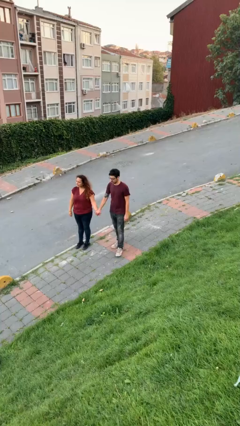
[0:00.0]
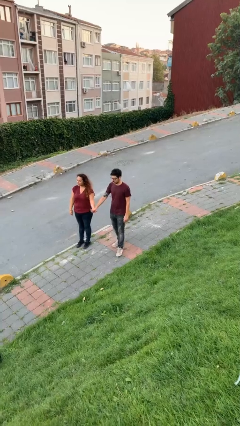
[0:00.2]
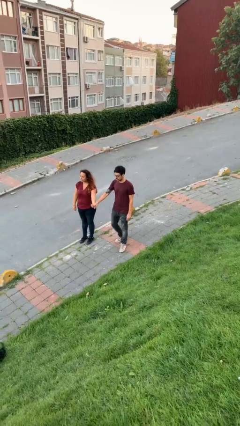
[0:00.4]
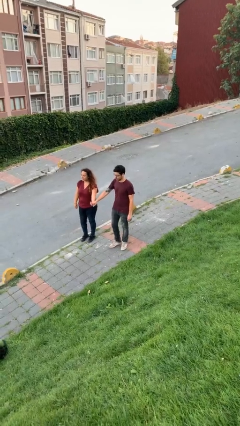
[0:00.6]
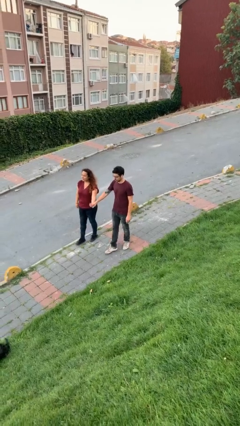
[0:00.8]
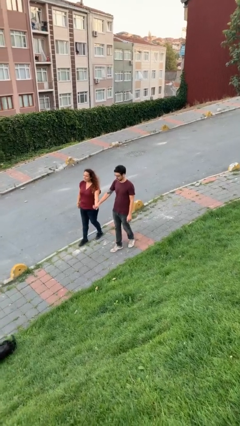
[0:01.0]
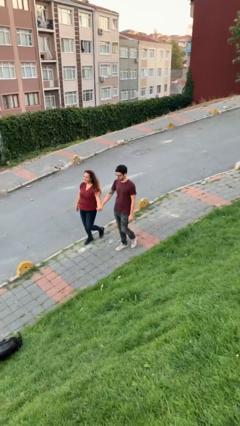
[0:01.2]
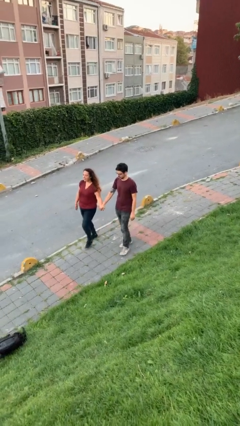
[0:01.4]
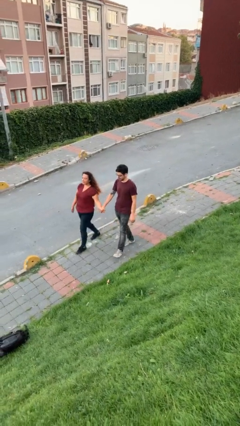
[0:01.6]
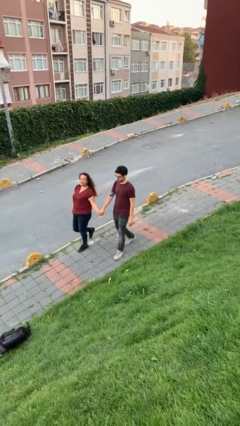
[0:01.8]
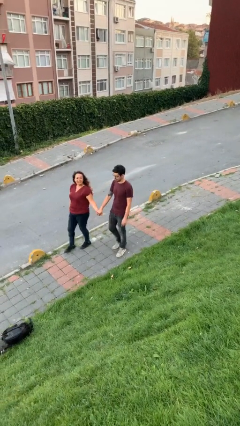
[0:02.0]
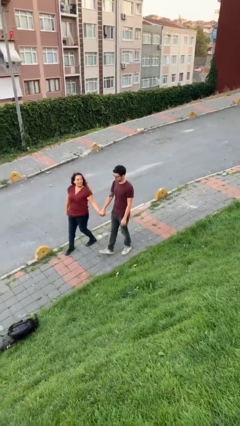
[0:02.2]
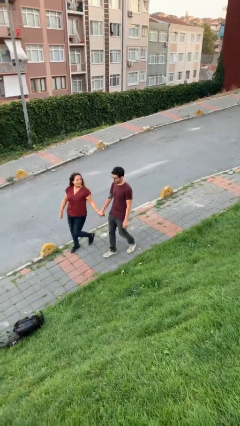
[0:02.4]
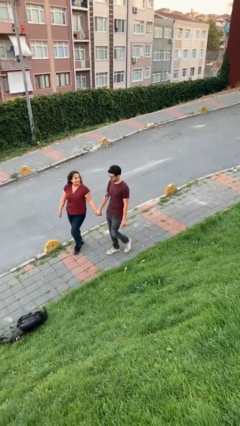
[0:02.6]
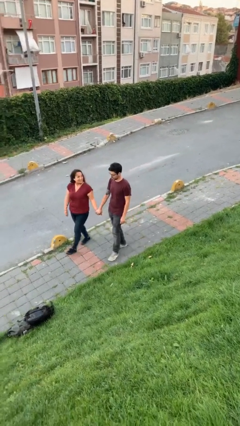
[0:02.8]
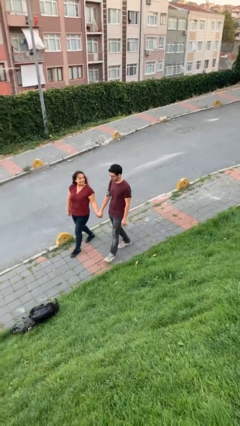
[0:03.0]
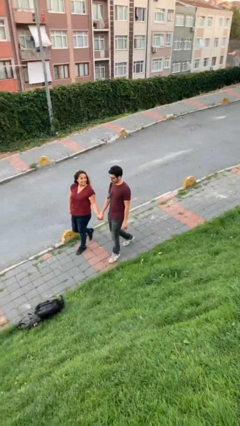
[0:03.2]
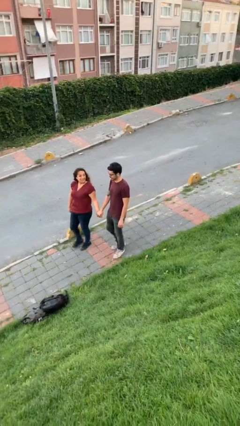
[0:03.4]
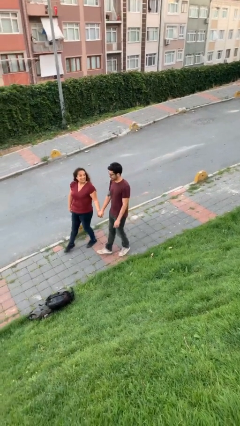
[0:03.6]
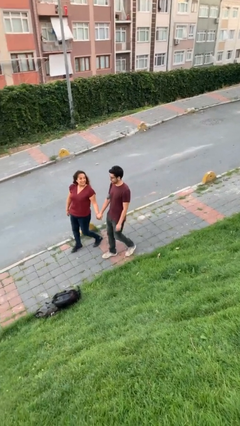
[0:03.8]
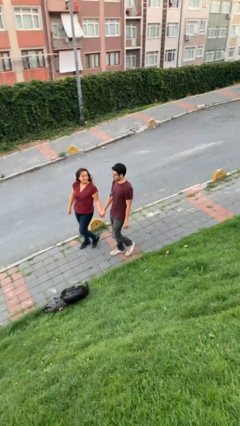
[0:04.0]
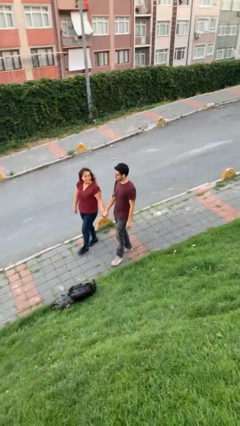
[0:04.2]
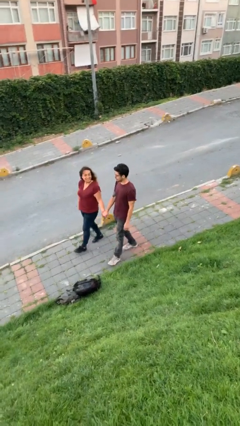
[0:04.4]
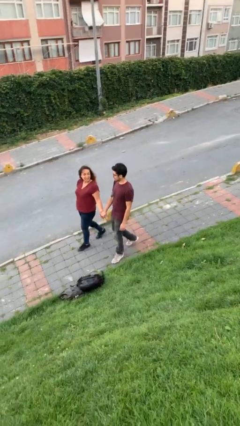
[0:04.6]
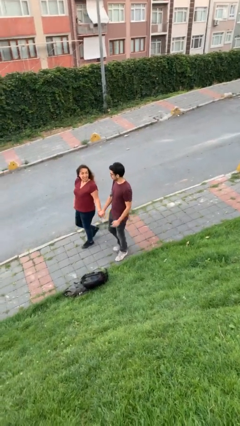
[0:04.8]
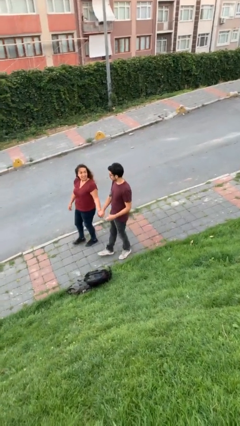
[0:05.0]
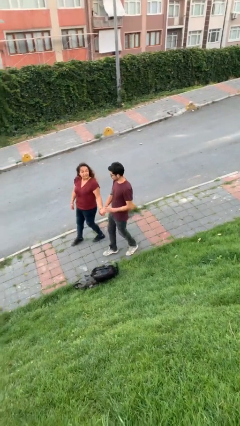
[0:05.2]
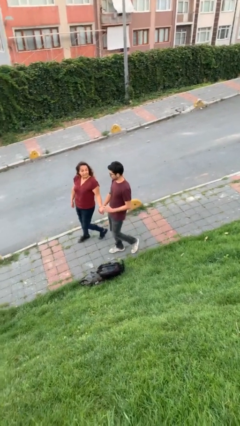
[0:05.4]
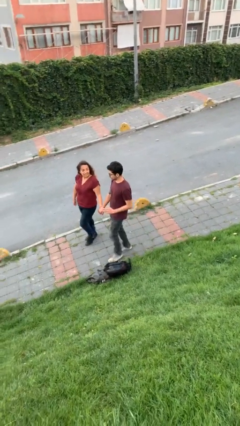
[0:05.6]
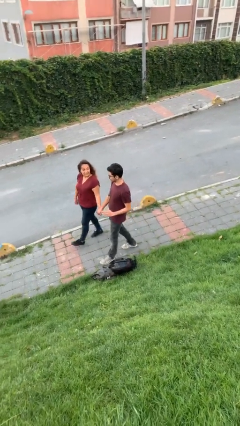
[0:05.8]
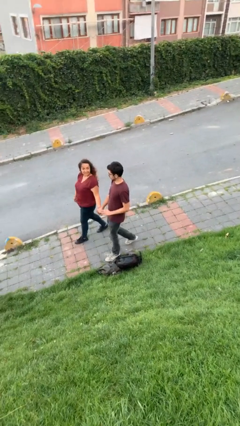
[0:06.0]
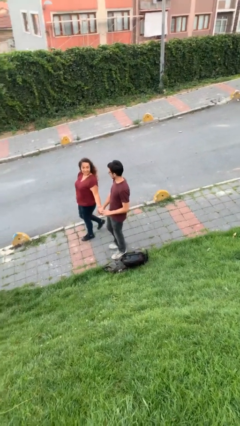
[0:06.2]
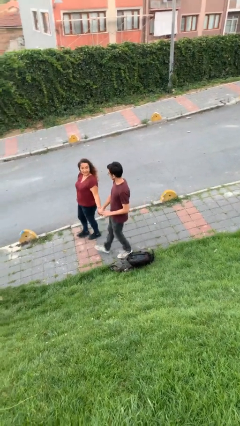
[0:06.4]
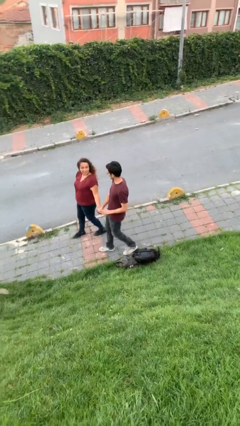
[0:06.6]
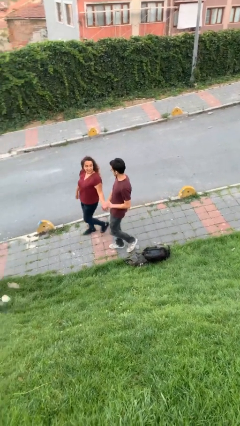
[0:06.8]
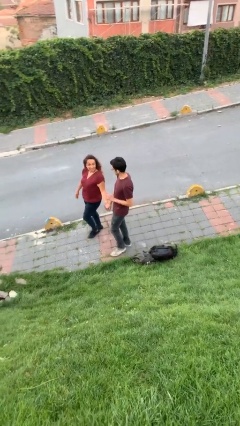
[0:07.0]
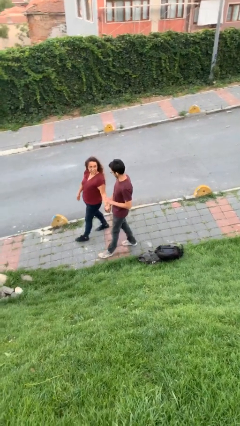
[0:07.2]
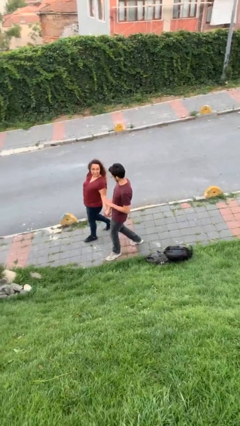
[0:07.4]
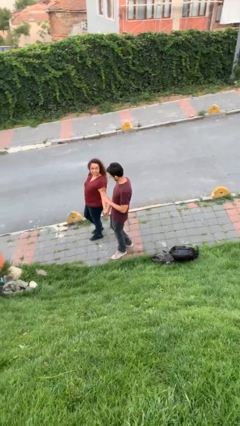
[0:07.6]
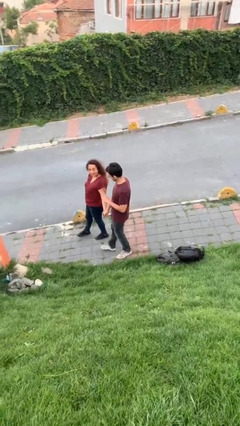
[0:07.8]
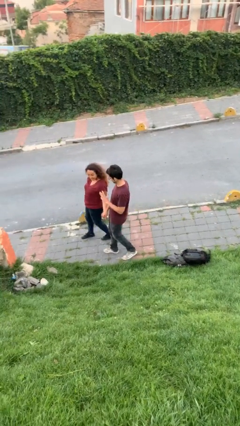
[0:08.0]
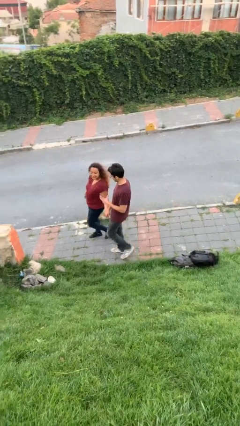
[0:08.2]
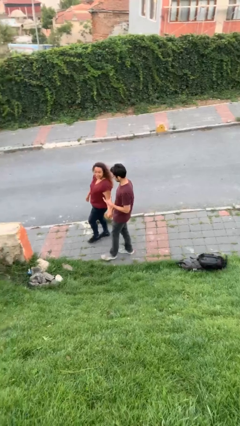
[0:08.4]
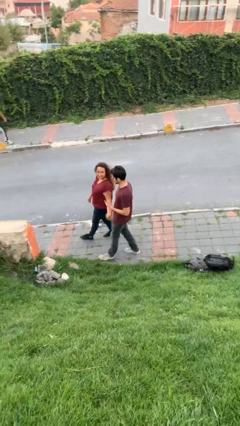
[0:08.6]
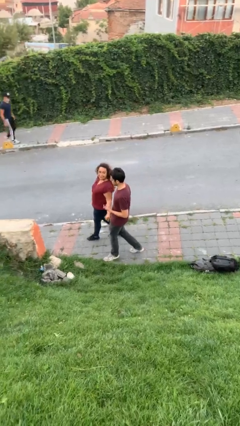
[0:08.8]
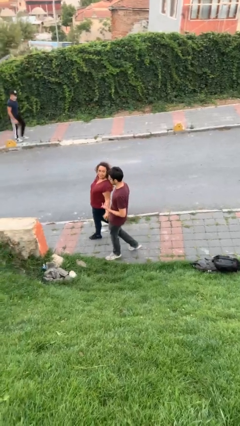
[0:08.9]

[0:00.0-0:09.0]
person holds hand

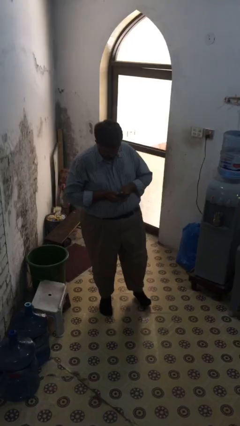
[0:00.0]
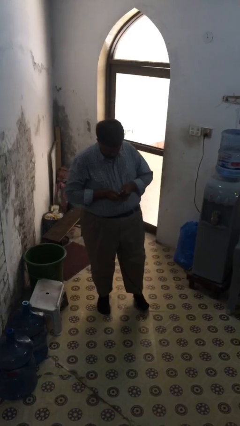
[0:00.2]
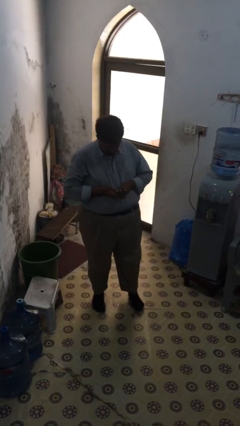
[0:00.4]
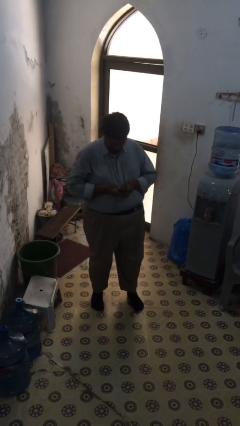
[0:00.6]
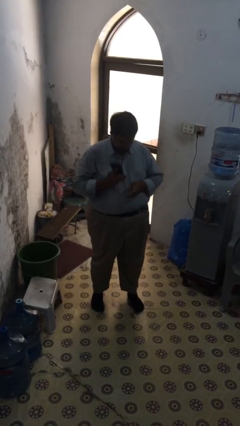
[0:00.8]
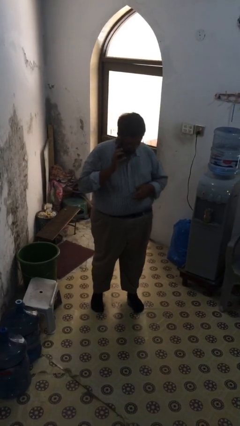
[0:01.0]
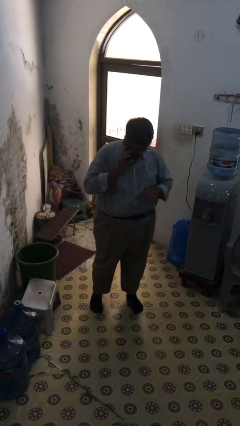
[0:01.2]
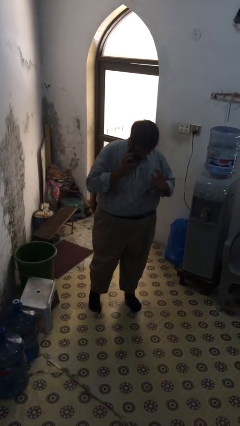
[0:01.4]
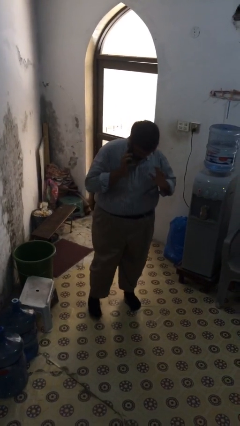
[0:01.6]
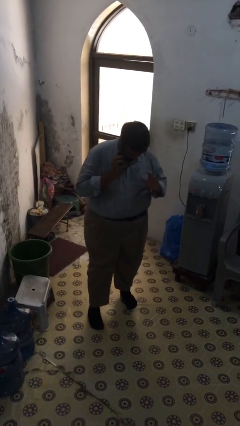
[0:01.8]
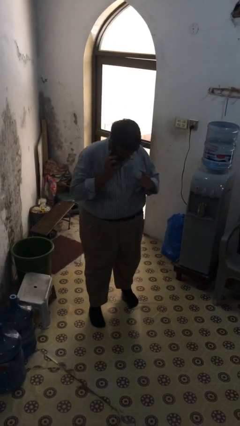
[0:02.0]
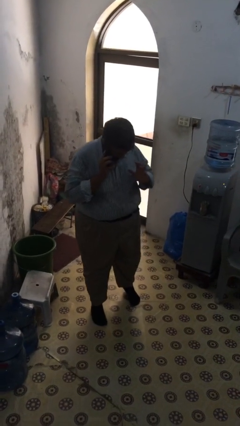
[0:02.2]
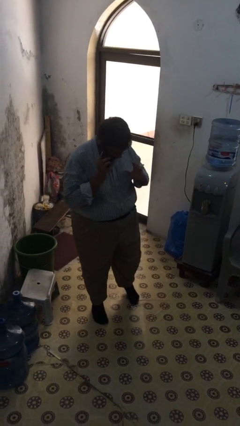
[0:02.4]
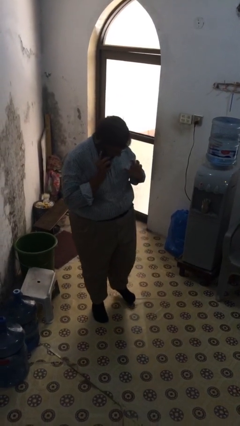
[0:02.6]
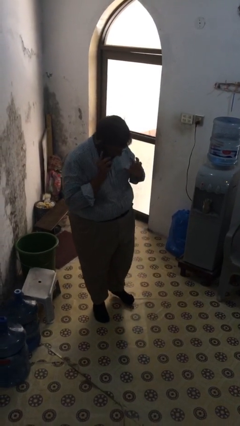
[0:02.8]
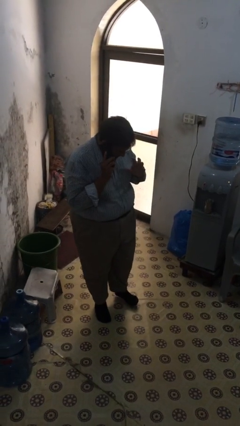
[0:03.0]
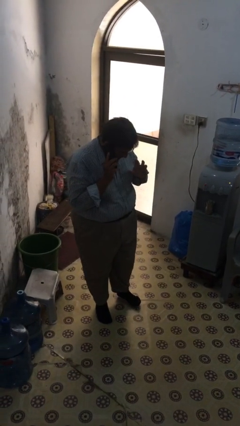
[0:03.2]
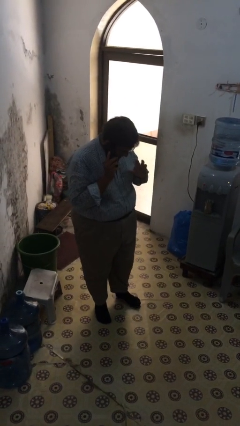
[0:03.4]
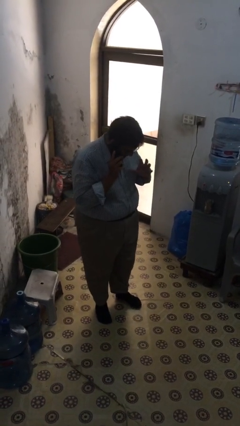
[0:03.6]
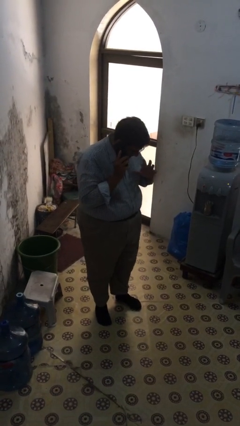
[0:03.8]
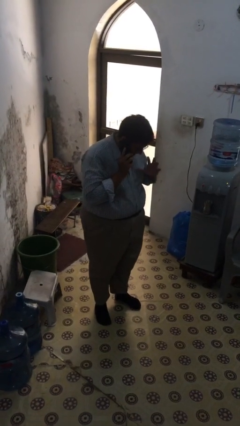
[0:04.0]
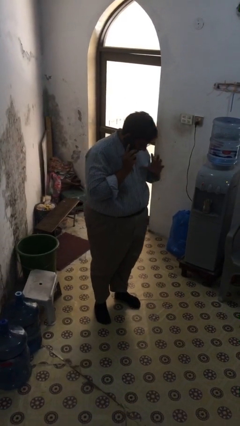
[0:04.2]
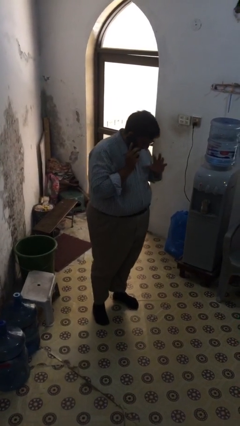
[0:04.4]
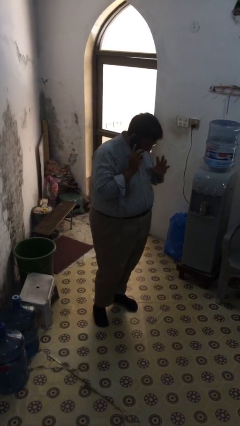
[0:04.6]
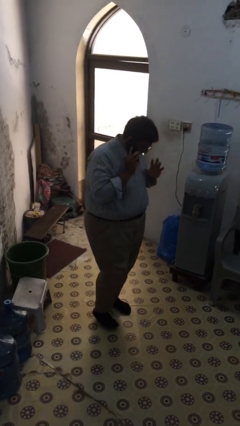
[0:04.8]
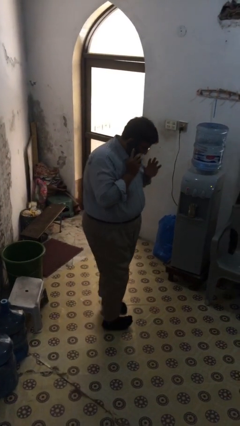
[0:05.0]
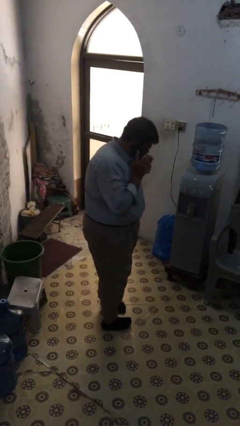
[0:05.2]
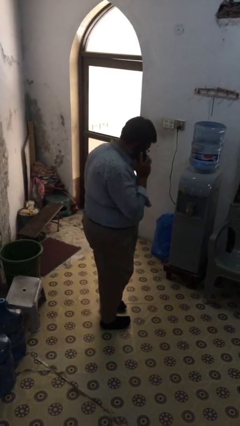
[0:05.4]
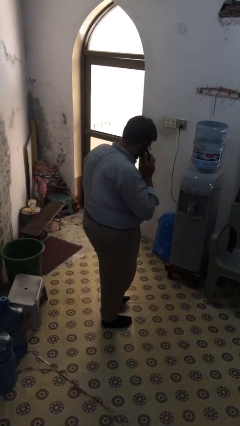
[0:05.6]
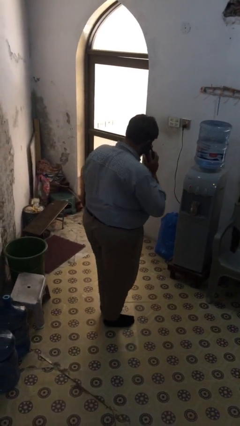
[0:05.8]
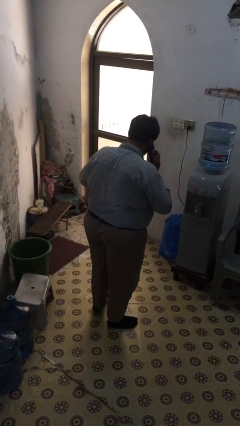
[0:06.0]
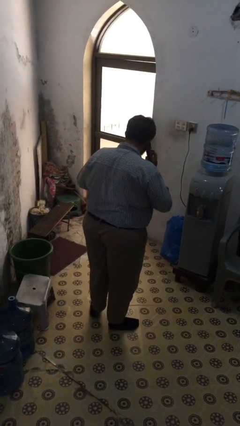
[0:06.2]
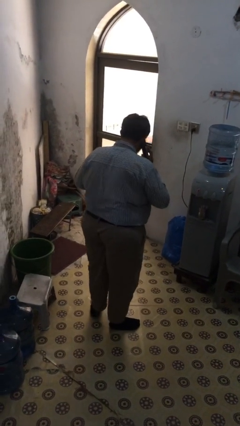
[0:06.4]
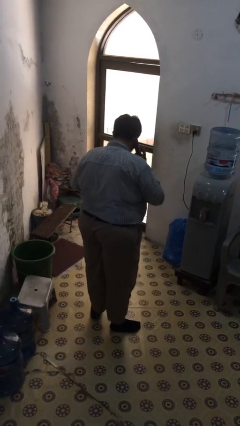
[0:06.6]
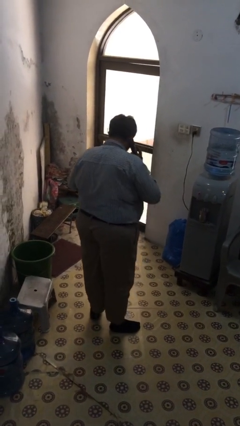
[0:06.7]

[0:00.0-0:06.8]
person talks on phone

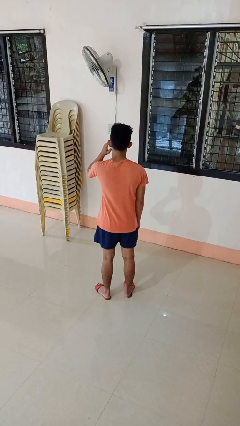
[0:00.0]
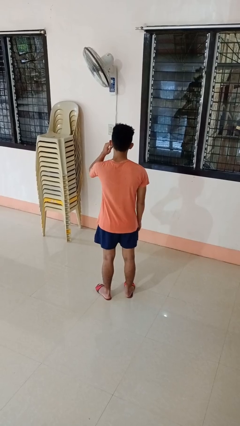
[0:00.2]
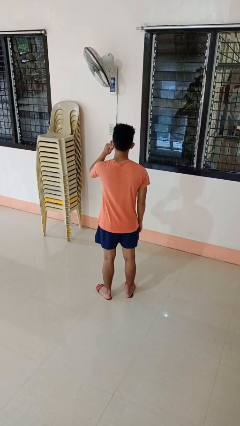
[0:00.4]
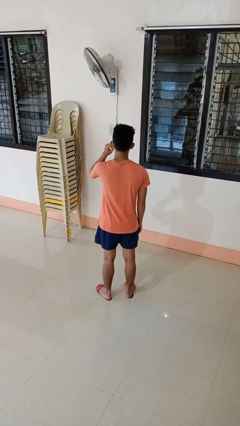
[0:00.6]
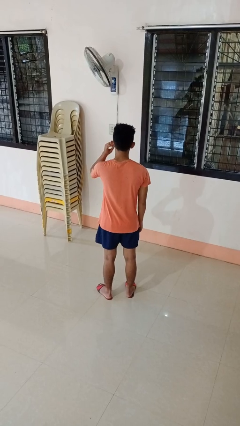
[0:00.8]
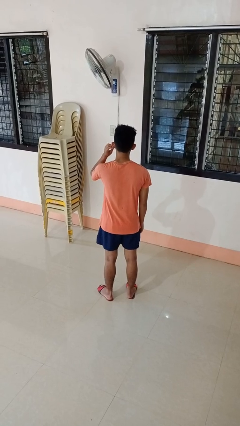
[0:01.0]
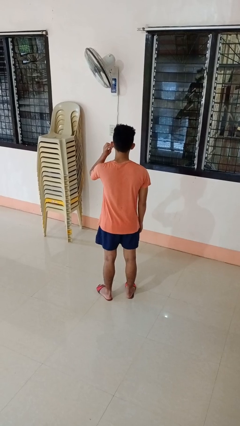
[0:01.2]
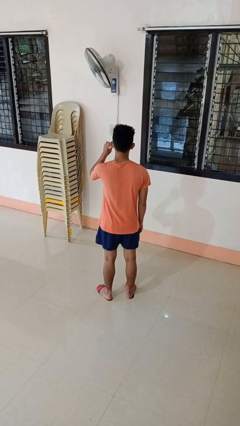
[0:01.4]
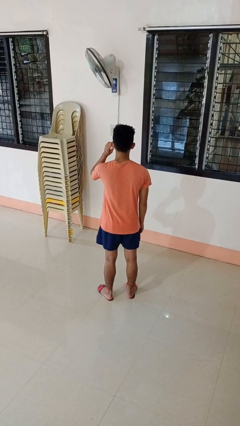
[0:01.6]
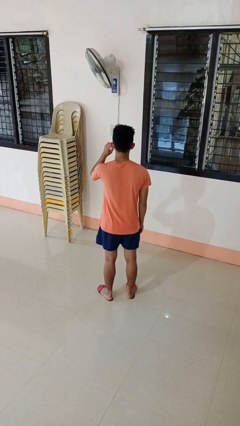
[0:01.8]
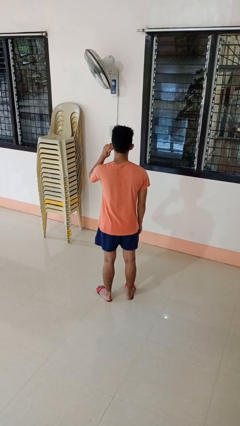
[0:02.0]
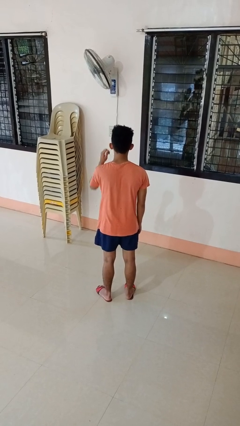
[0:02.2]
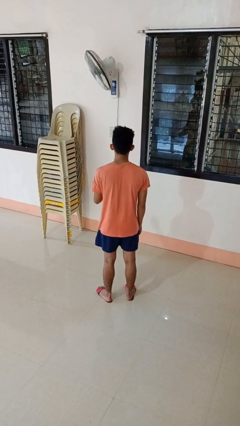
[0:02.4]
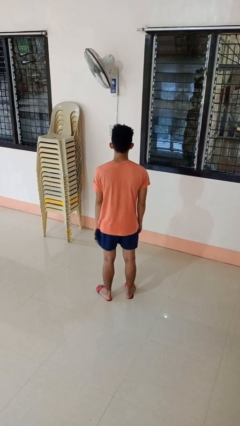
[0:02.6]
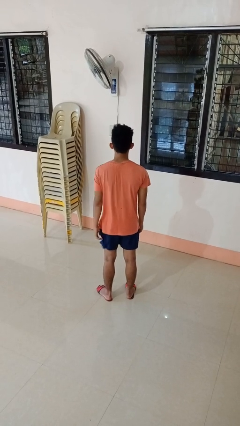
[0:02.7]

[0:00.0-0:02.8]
person touches earlobe
